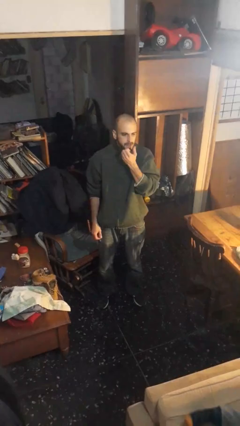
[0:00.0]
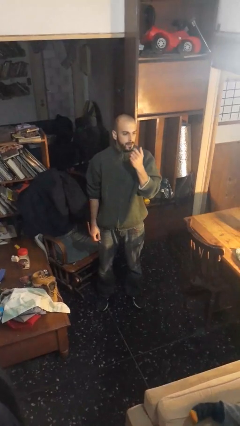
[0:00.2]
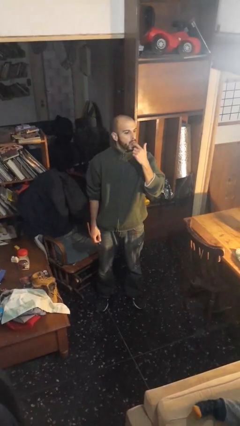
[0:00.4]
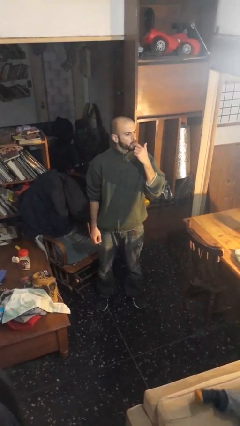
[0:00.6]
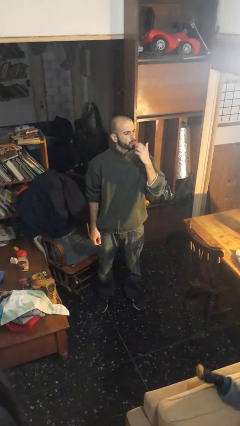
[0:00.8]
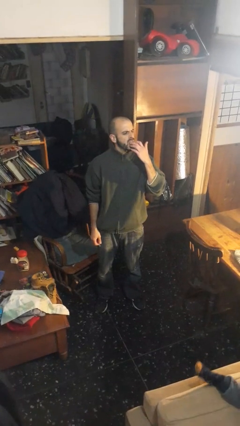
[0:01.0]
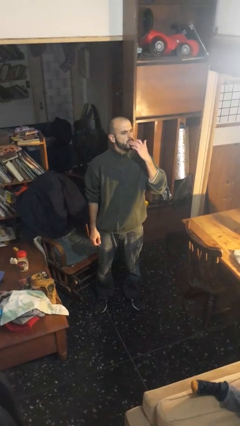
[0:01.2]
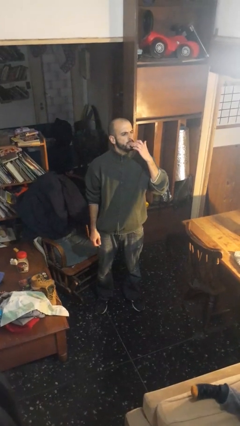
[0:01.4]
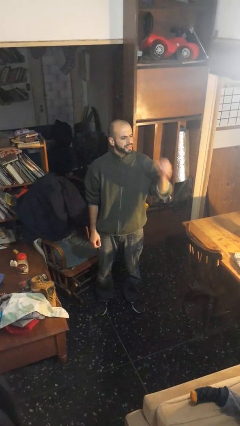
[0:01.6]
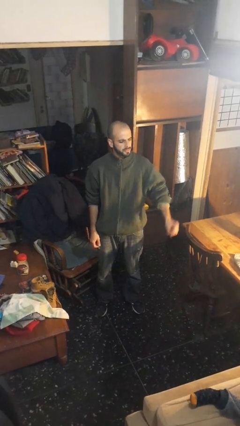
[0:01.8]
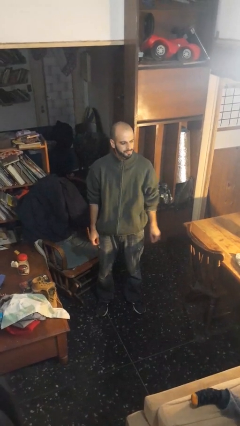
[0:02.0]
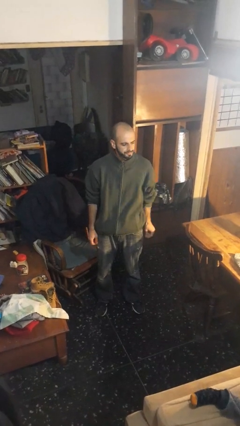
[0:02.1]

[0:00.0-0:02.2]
person licks fingers

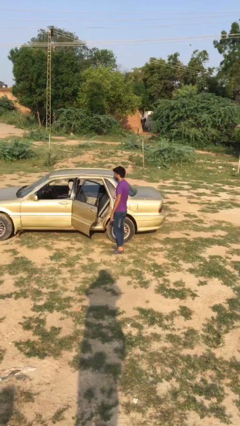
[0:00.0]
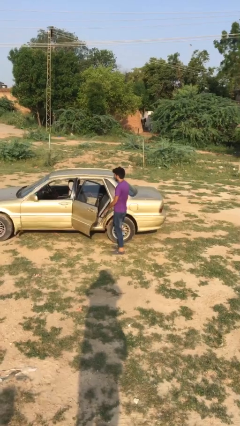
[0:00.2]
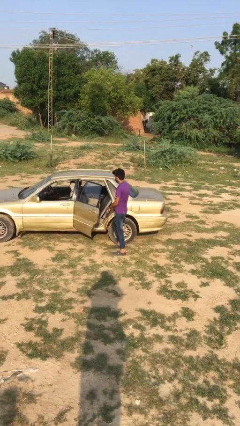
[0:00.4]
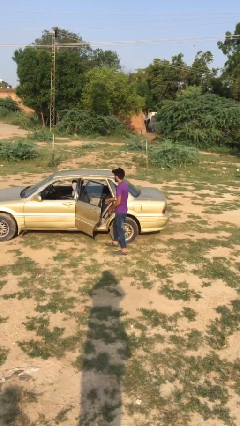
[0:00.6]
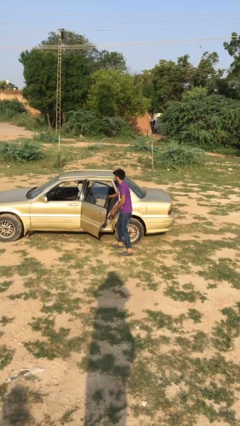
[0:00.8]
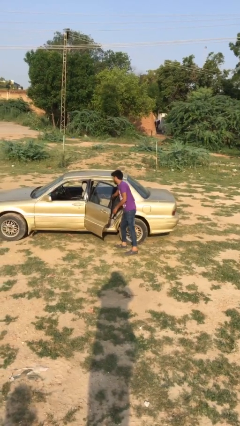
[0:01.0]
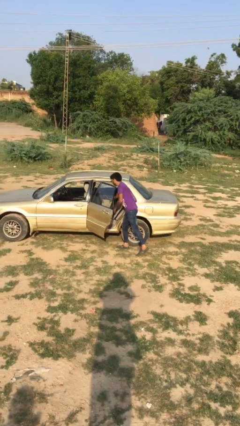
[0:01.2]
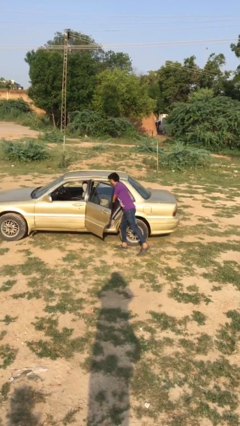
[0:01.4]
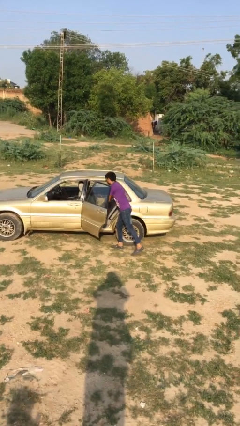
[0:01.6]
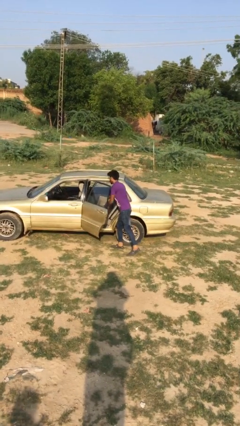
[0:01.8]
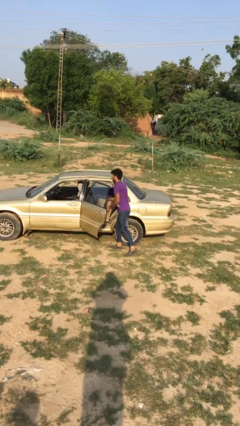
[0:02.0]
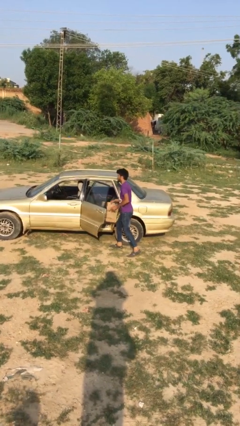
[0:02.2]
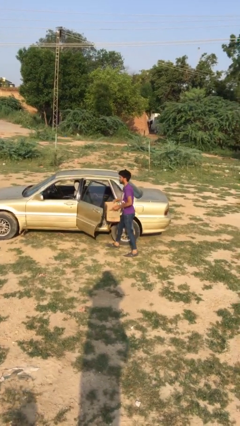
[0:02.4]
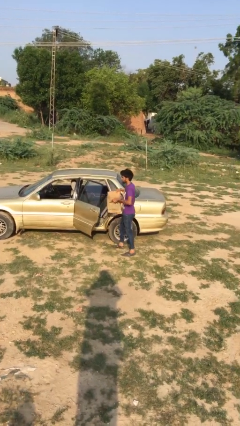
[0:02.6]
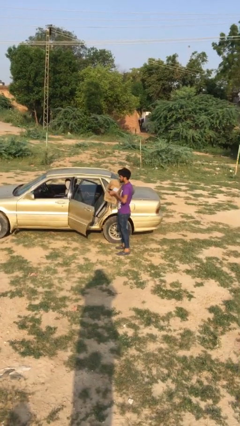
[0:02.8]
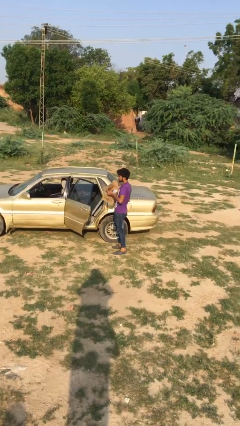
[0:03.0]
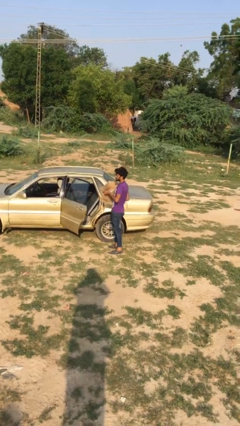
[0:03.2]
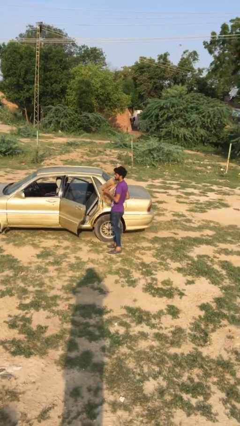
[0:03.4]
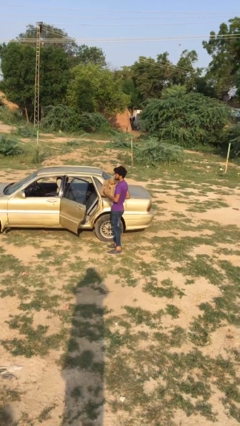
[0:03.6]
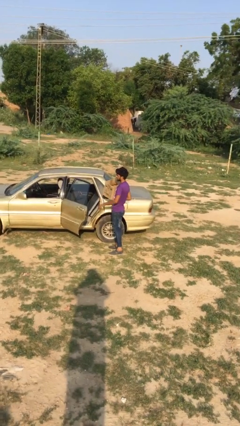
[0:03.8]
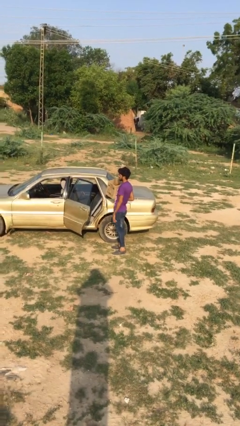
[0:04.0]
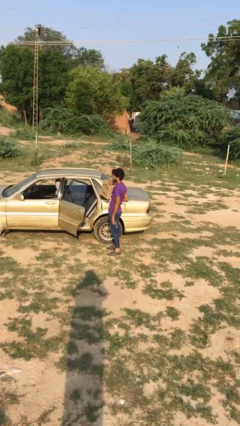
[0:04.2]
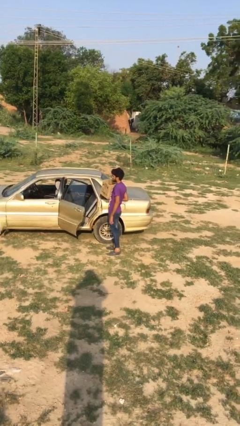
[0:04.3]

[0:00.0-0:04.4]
person unloads car

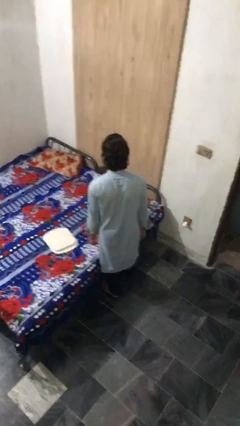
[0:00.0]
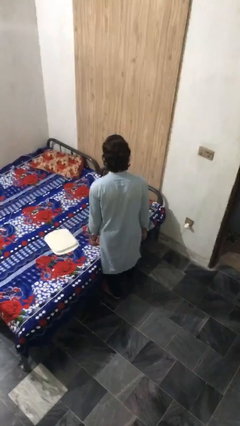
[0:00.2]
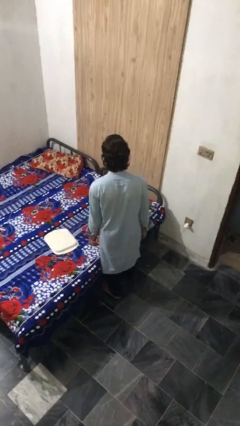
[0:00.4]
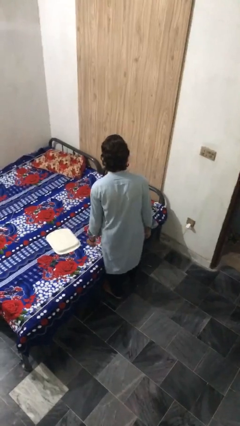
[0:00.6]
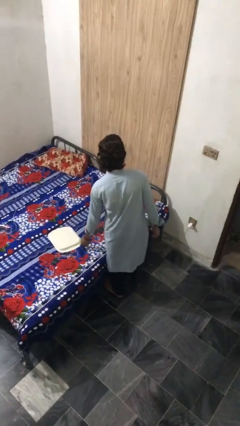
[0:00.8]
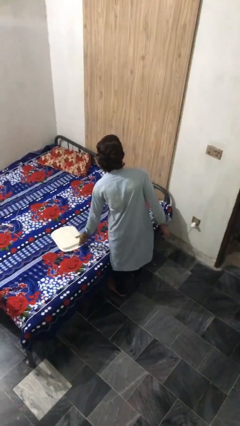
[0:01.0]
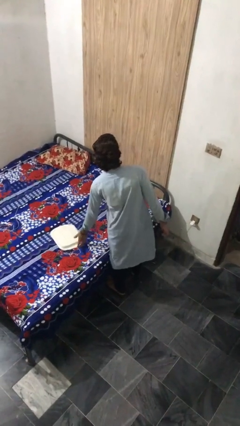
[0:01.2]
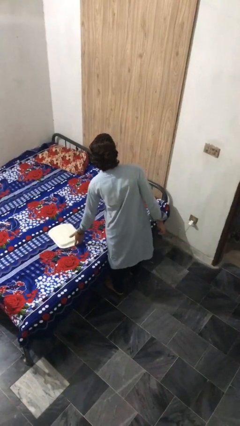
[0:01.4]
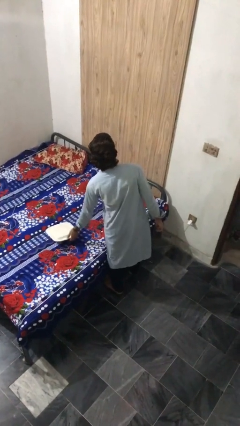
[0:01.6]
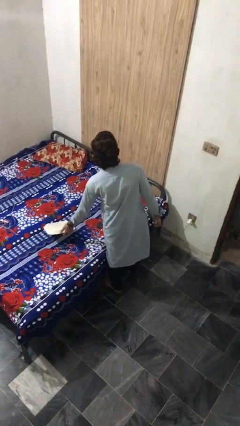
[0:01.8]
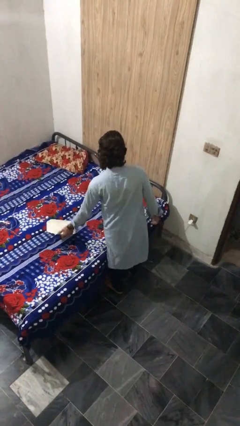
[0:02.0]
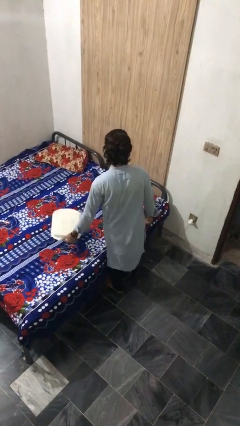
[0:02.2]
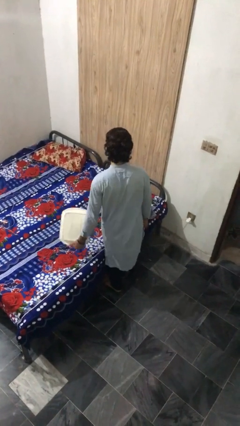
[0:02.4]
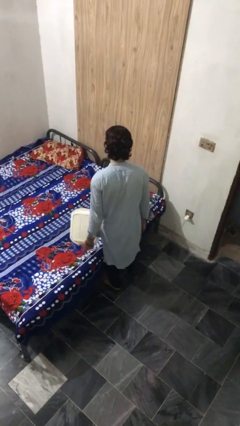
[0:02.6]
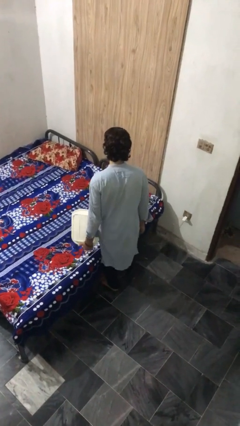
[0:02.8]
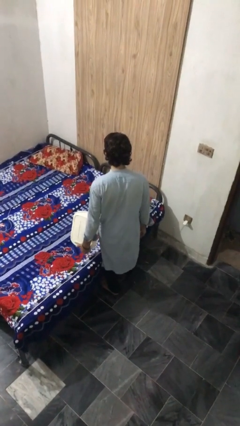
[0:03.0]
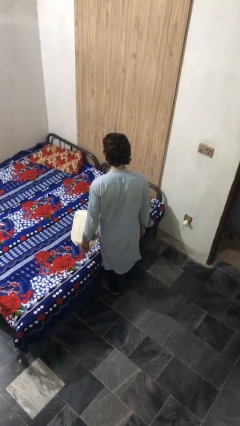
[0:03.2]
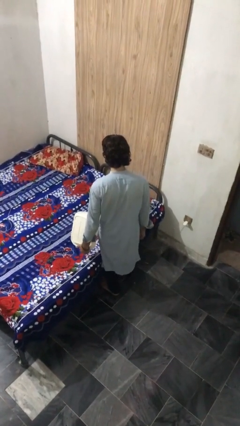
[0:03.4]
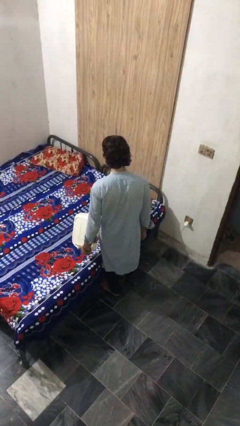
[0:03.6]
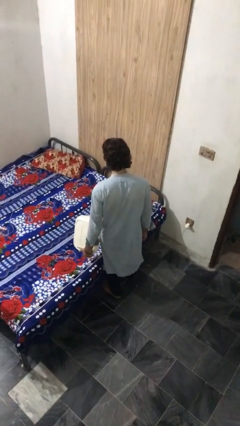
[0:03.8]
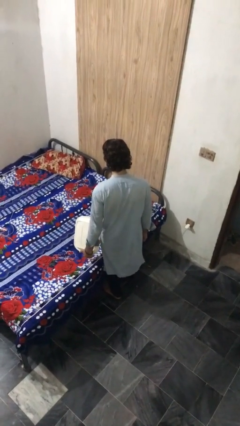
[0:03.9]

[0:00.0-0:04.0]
person picks up object from bed

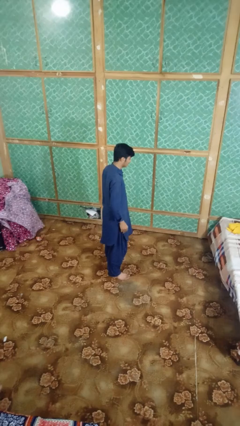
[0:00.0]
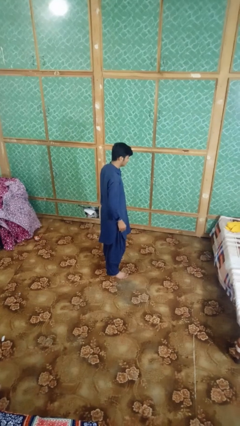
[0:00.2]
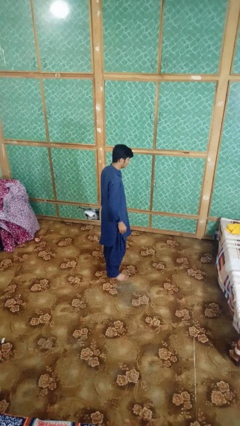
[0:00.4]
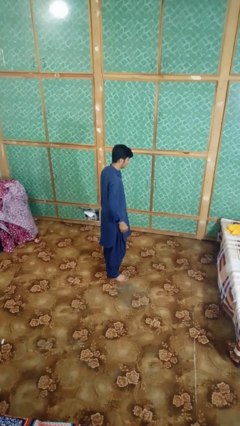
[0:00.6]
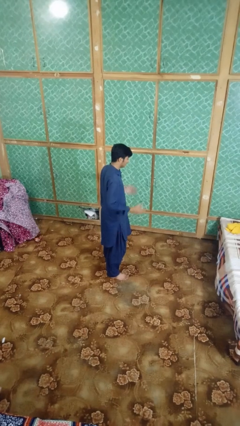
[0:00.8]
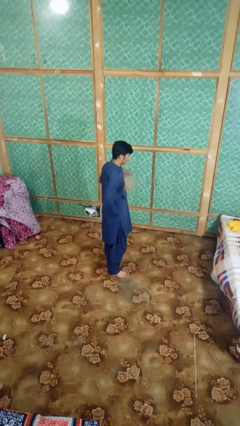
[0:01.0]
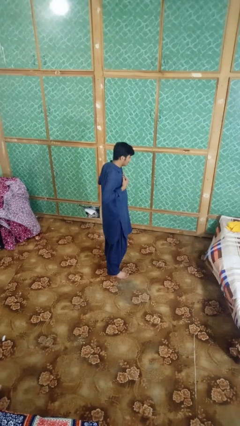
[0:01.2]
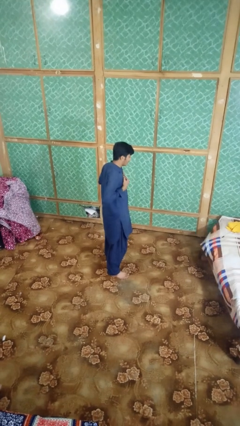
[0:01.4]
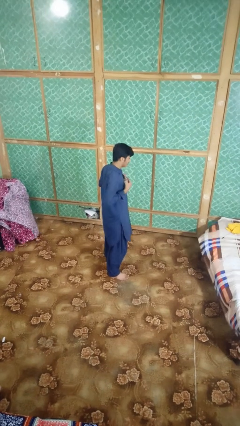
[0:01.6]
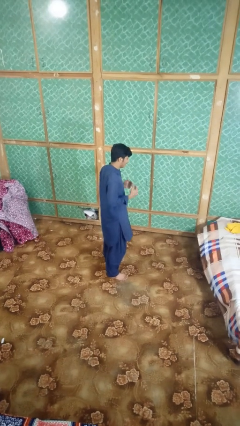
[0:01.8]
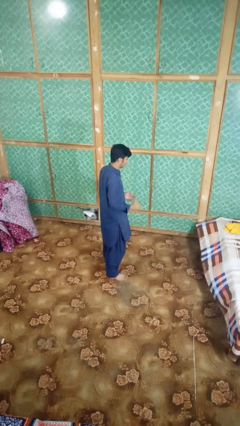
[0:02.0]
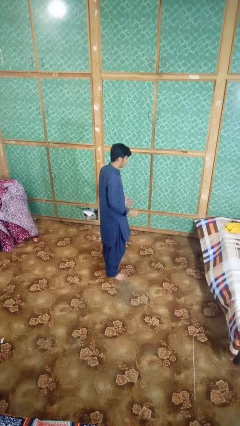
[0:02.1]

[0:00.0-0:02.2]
person drums on chest

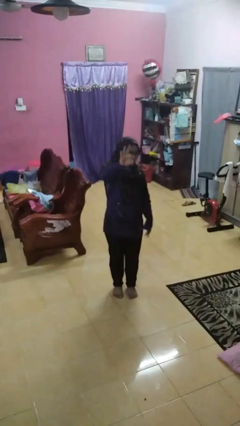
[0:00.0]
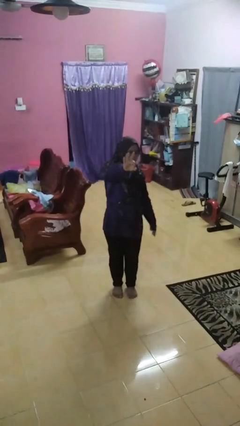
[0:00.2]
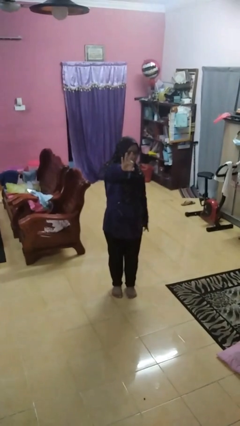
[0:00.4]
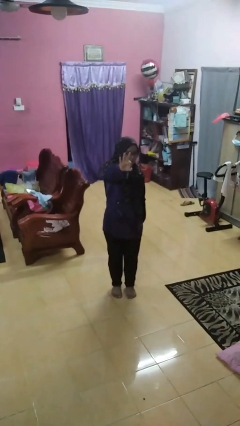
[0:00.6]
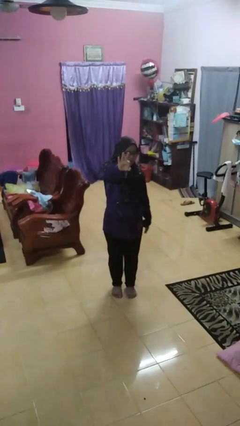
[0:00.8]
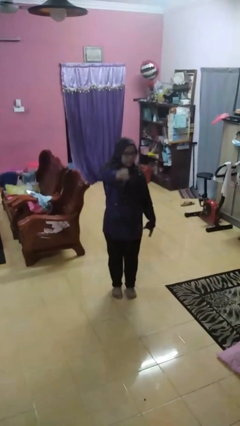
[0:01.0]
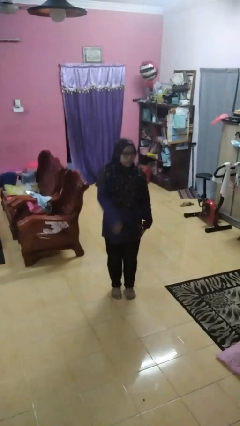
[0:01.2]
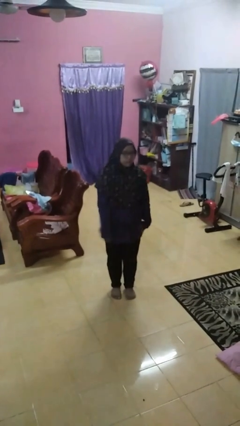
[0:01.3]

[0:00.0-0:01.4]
person gestures number three

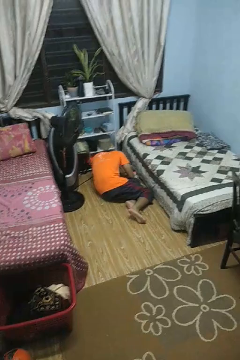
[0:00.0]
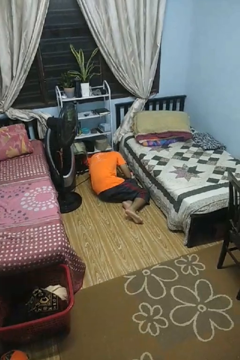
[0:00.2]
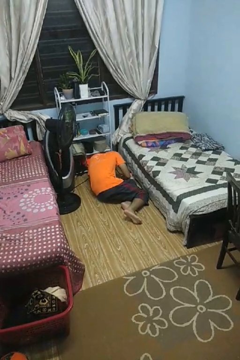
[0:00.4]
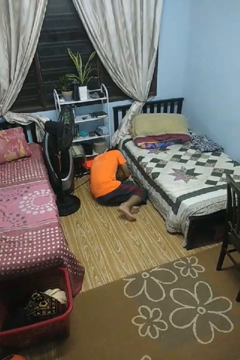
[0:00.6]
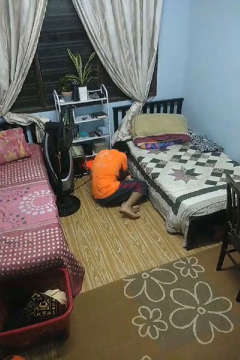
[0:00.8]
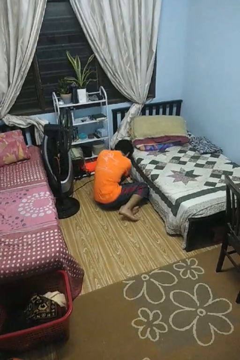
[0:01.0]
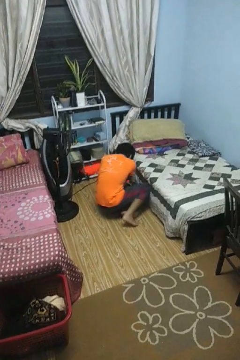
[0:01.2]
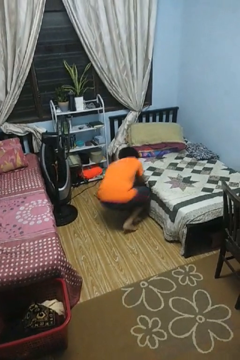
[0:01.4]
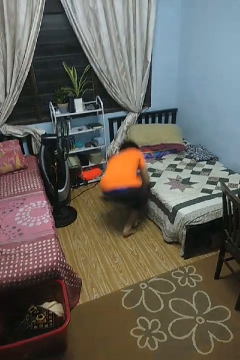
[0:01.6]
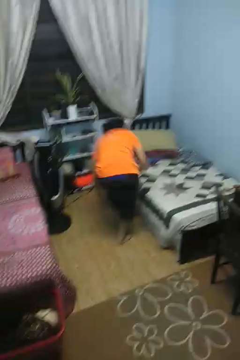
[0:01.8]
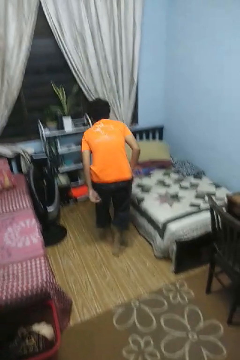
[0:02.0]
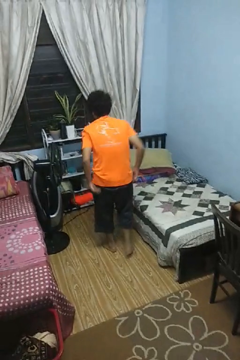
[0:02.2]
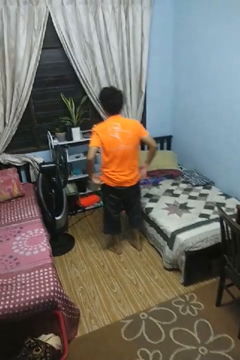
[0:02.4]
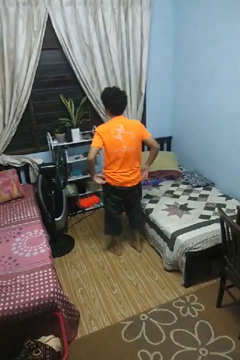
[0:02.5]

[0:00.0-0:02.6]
person stands up from floor

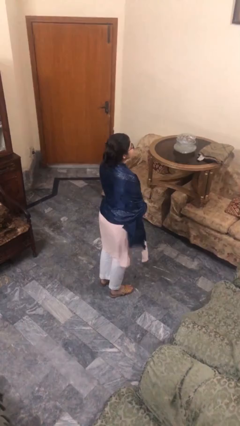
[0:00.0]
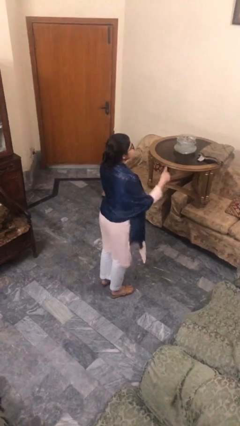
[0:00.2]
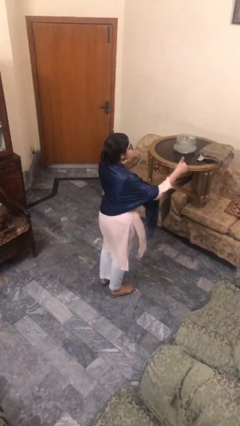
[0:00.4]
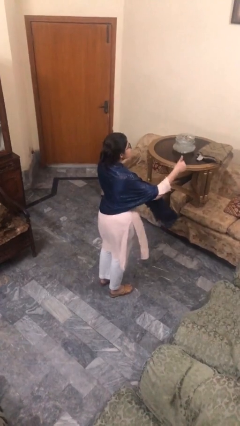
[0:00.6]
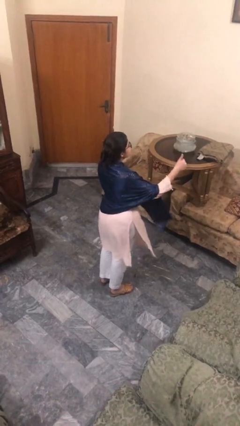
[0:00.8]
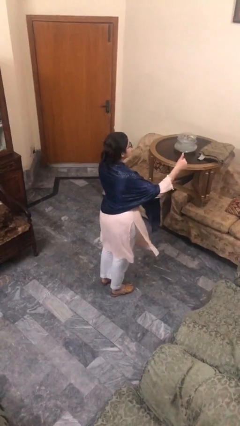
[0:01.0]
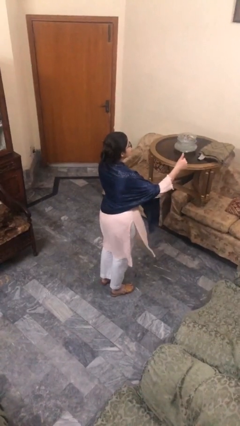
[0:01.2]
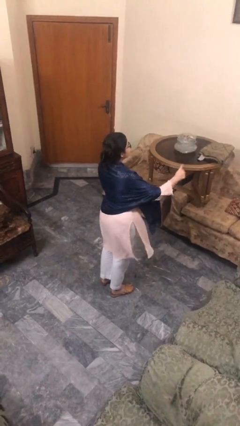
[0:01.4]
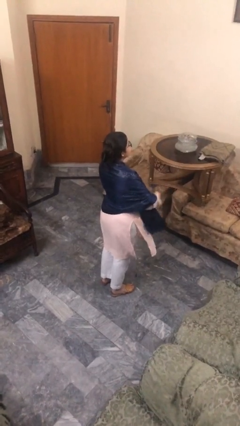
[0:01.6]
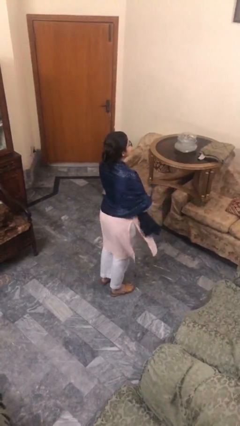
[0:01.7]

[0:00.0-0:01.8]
person gestures thumbs up
